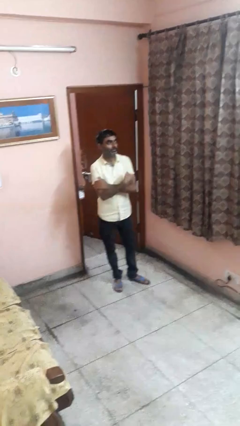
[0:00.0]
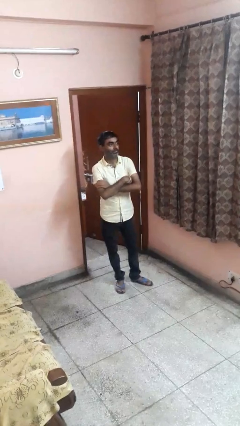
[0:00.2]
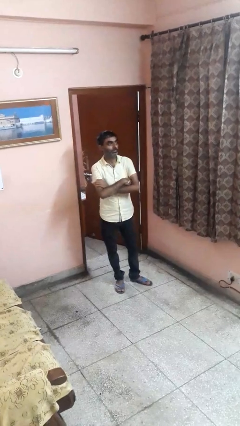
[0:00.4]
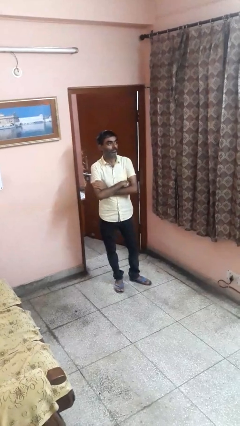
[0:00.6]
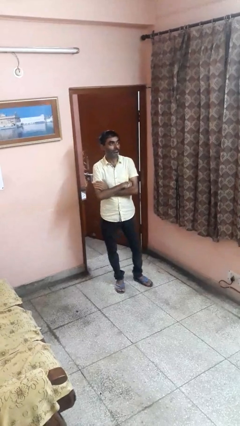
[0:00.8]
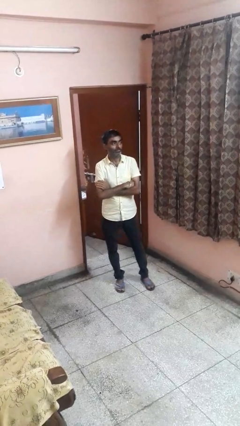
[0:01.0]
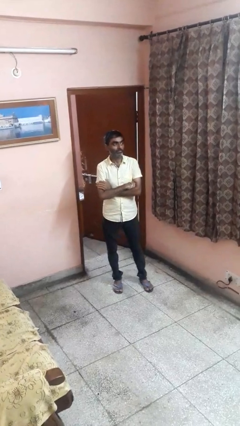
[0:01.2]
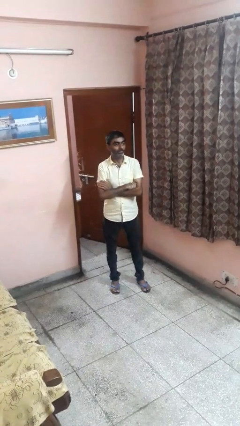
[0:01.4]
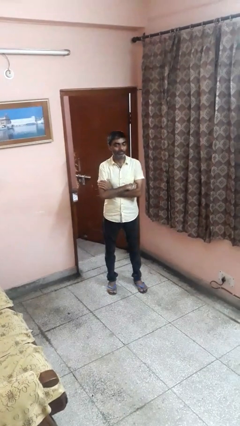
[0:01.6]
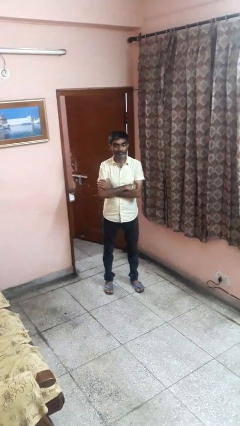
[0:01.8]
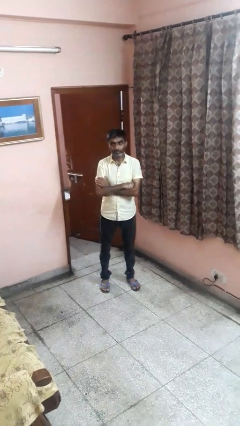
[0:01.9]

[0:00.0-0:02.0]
person crosses arms

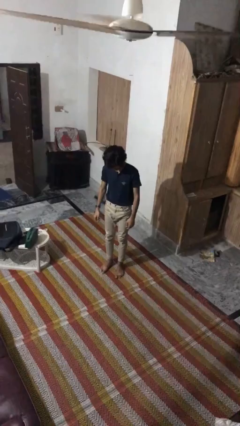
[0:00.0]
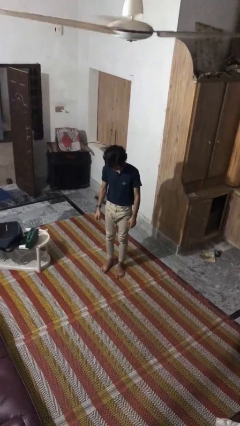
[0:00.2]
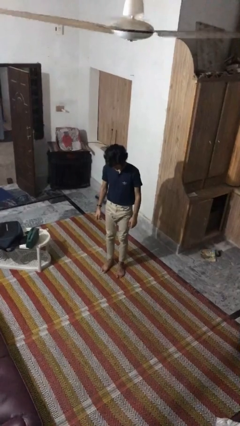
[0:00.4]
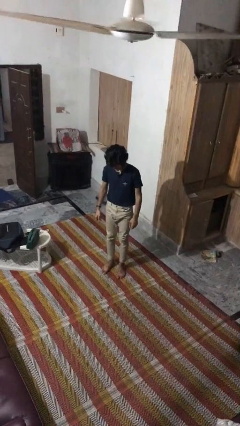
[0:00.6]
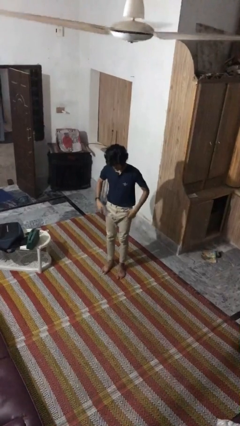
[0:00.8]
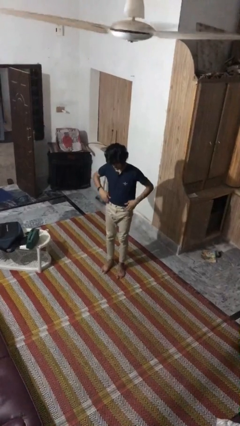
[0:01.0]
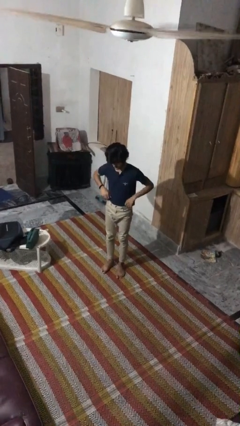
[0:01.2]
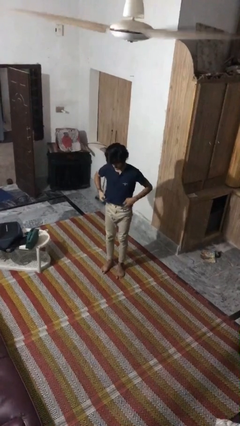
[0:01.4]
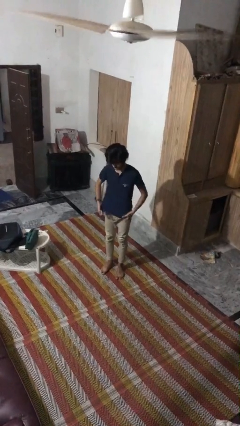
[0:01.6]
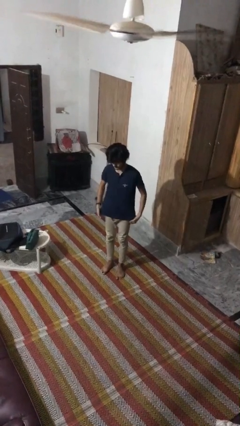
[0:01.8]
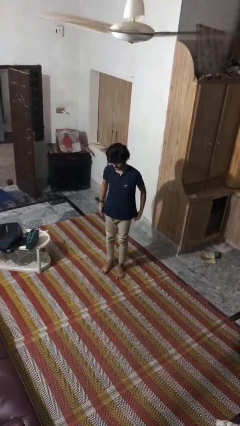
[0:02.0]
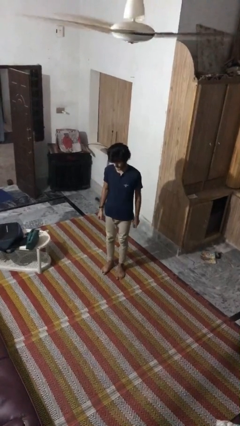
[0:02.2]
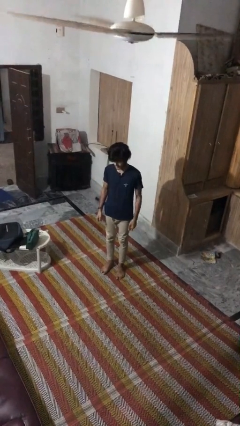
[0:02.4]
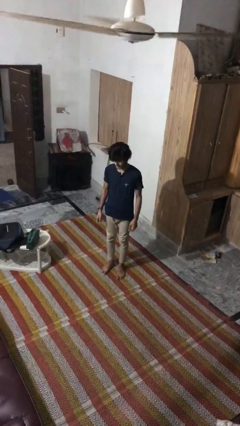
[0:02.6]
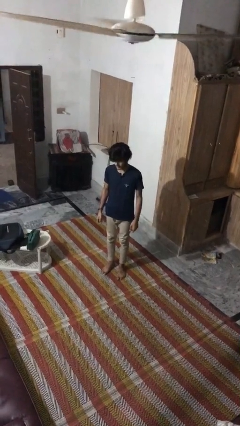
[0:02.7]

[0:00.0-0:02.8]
person untucks shirt

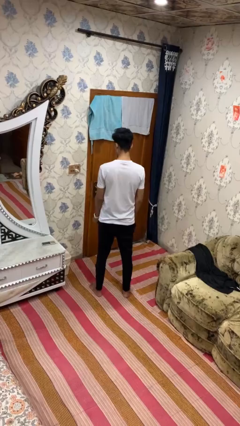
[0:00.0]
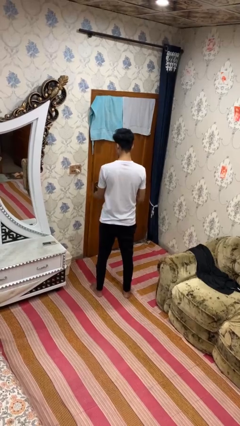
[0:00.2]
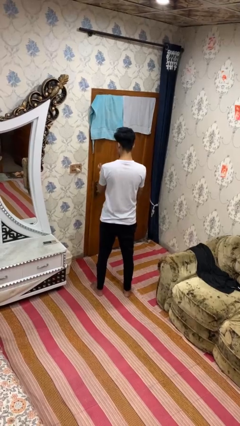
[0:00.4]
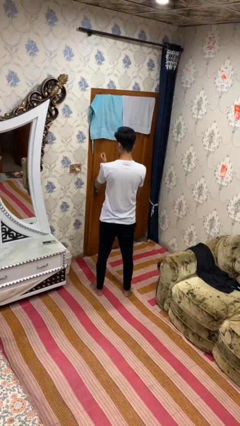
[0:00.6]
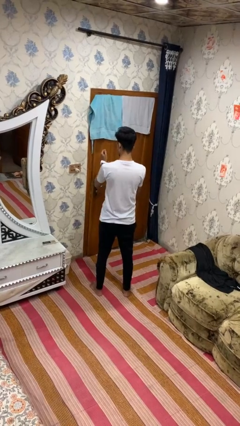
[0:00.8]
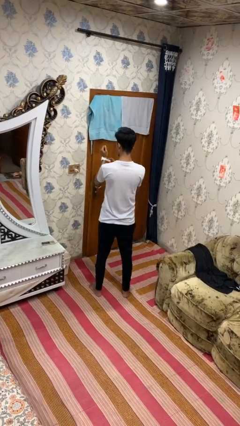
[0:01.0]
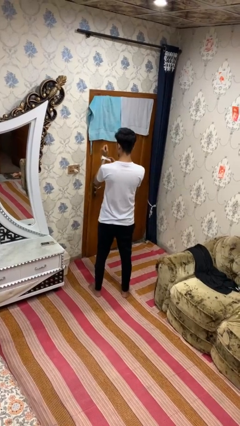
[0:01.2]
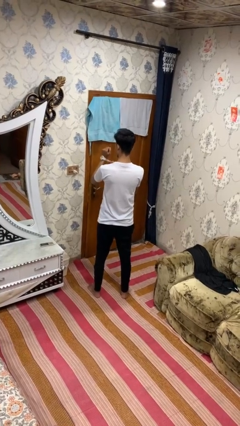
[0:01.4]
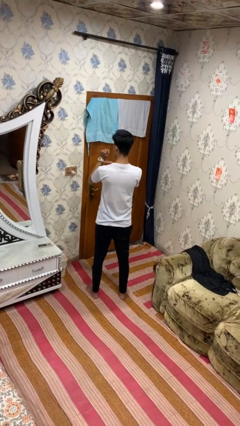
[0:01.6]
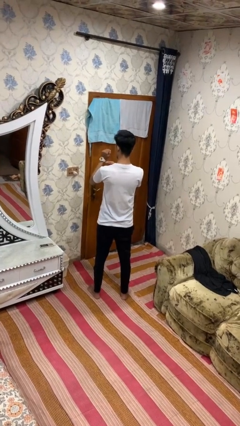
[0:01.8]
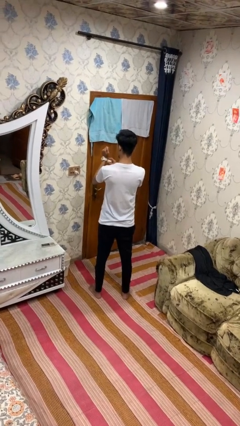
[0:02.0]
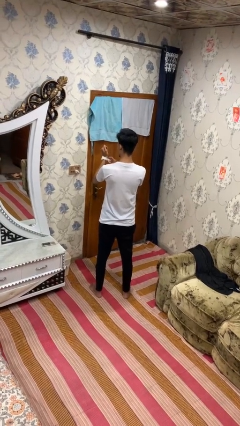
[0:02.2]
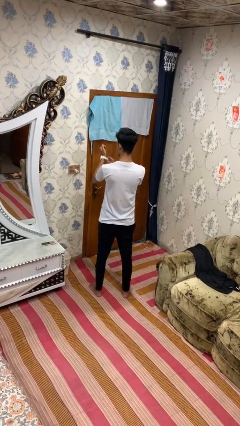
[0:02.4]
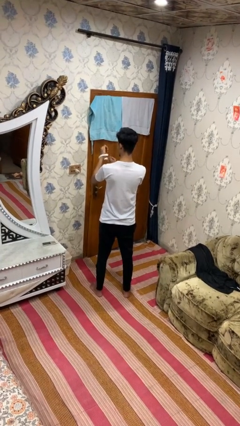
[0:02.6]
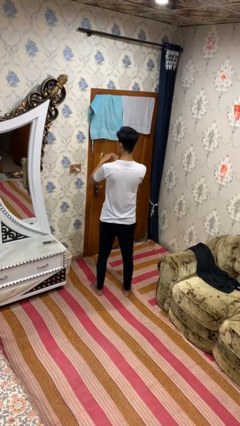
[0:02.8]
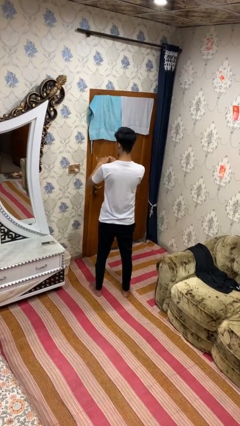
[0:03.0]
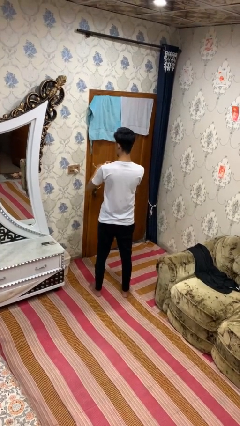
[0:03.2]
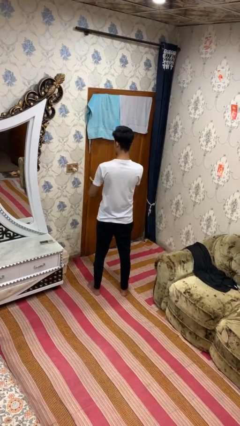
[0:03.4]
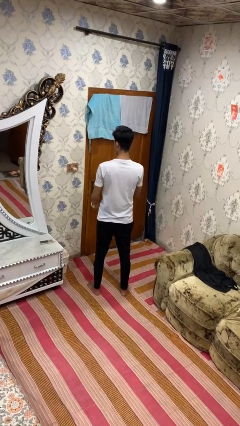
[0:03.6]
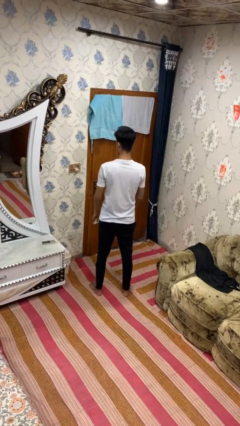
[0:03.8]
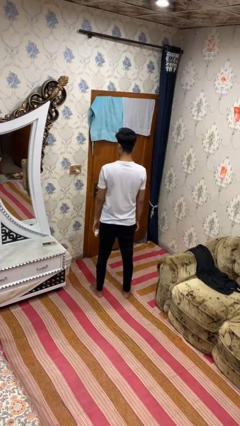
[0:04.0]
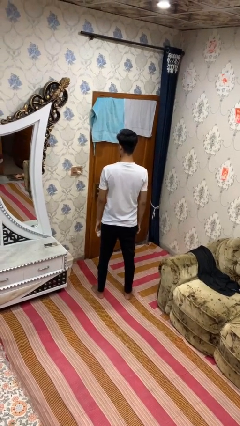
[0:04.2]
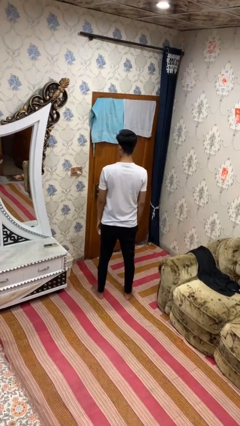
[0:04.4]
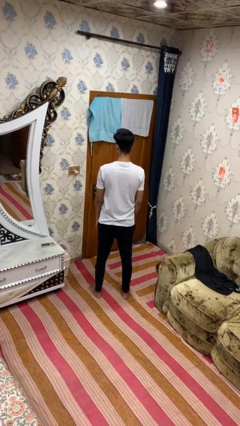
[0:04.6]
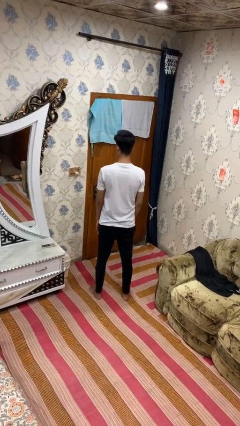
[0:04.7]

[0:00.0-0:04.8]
person takes off wristwatch

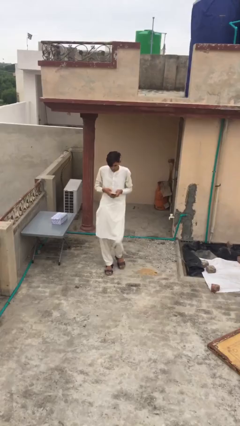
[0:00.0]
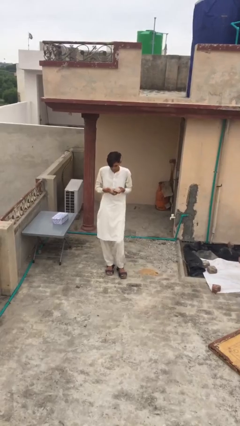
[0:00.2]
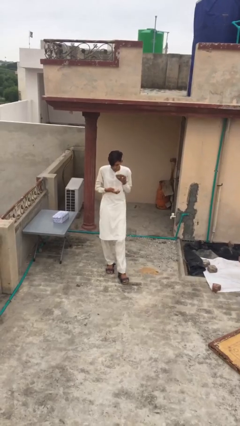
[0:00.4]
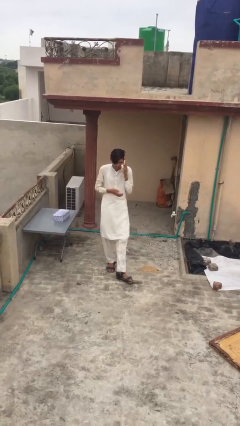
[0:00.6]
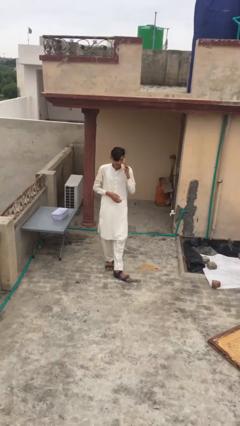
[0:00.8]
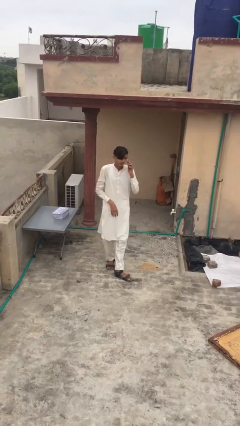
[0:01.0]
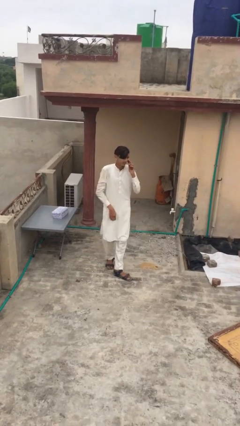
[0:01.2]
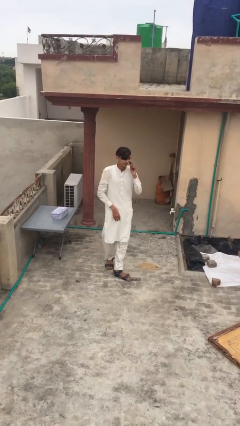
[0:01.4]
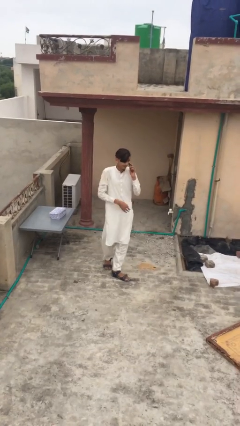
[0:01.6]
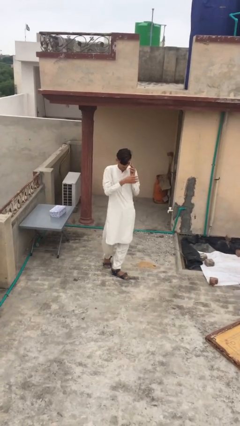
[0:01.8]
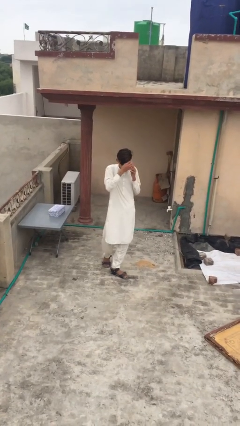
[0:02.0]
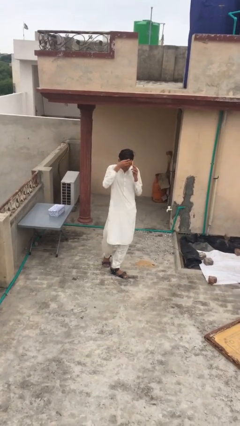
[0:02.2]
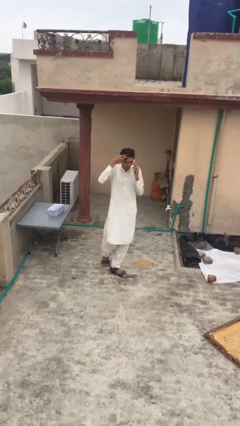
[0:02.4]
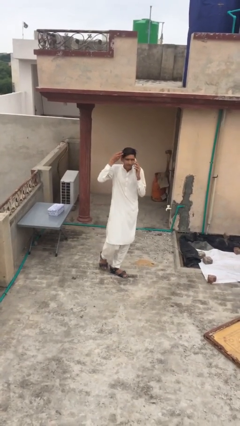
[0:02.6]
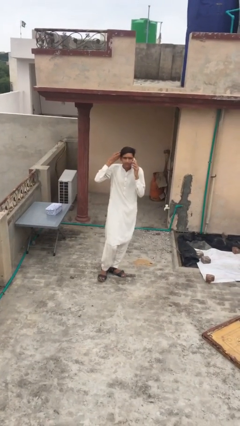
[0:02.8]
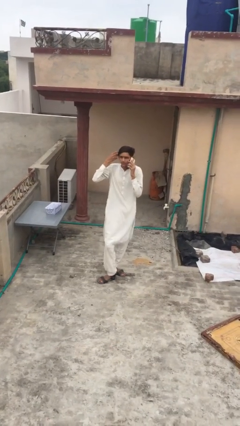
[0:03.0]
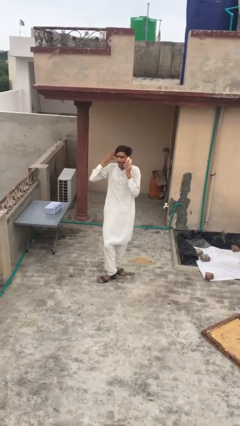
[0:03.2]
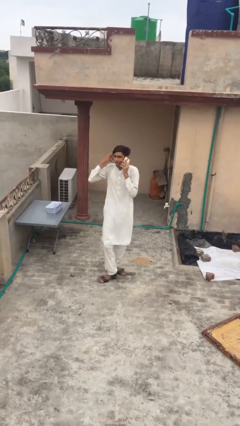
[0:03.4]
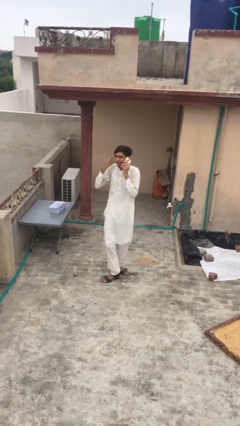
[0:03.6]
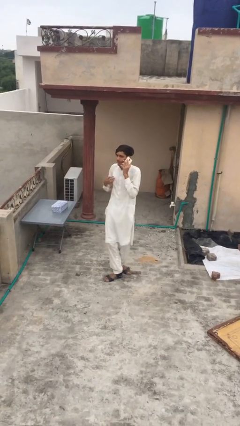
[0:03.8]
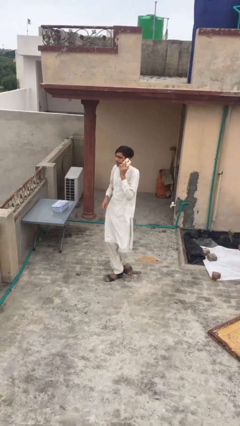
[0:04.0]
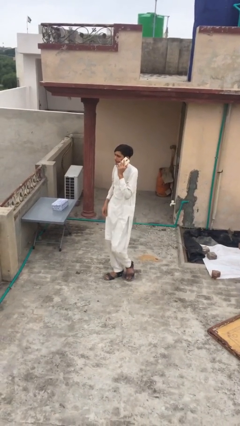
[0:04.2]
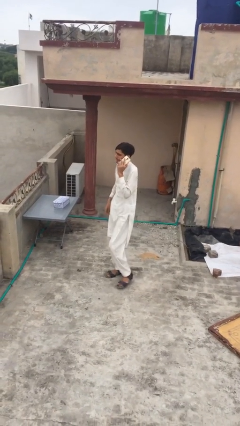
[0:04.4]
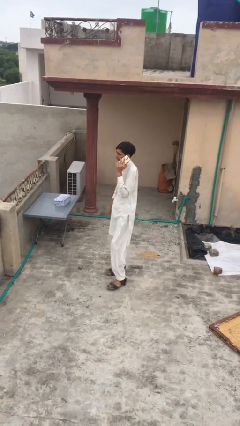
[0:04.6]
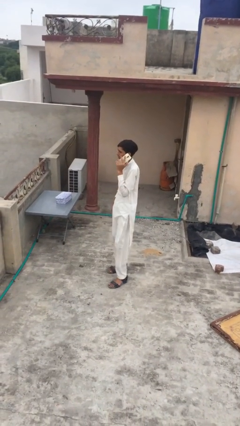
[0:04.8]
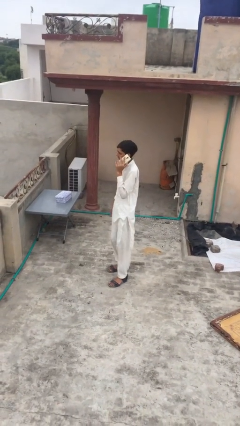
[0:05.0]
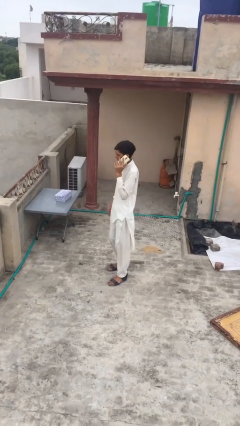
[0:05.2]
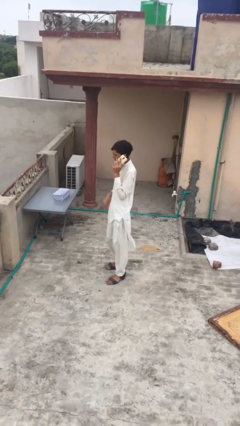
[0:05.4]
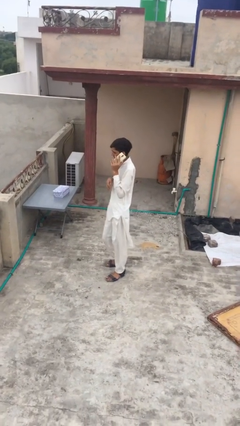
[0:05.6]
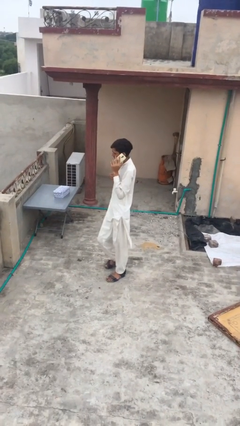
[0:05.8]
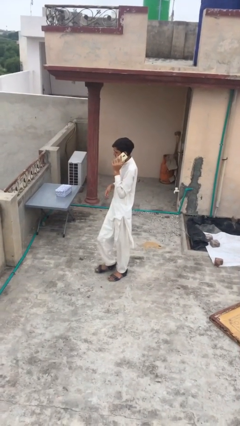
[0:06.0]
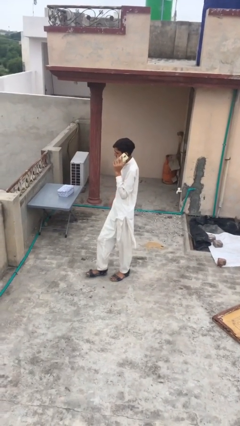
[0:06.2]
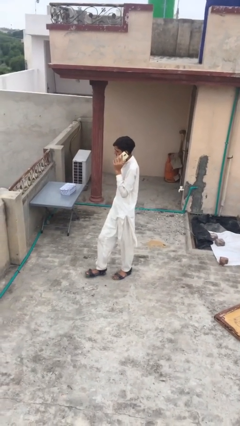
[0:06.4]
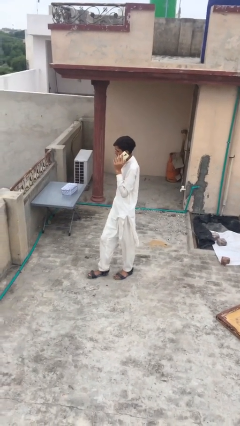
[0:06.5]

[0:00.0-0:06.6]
person talks on phone

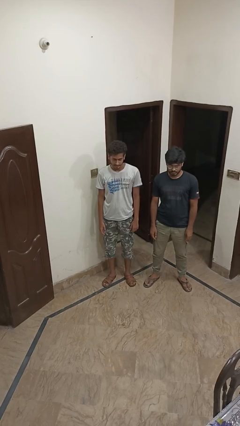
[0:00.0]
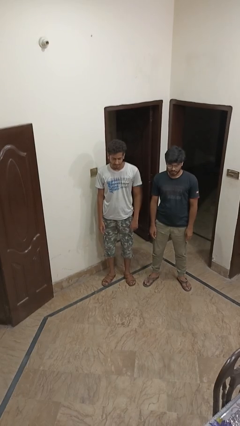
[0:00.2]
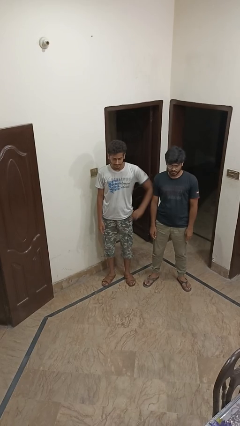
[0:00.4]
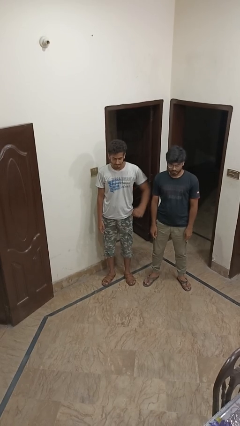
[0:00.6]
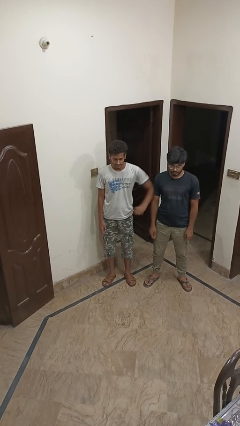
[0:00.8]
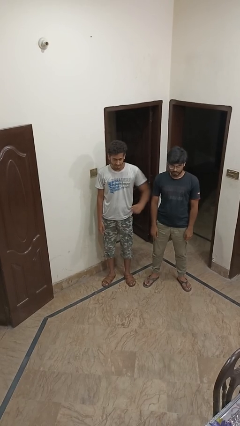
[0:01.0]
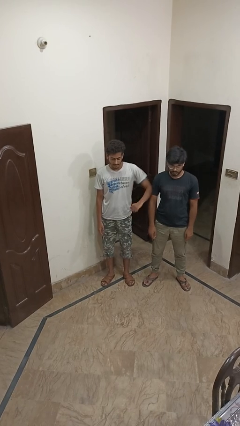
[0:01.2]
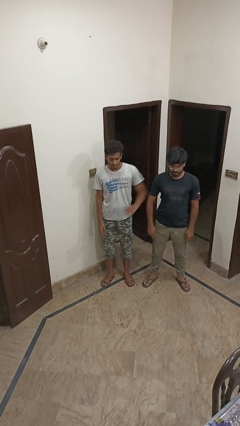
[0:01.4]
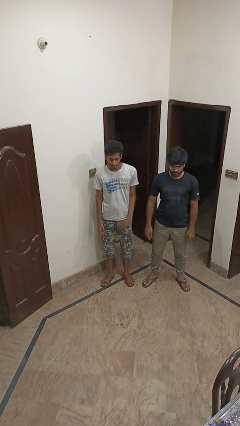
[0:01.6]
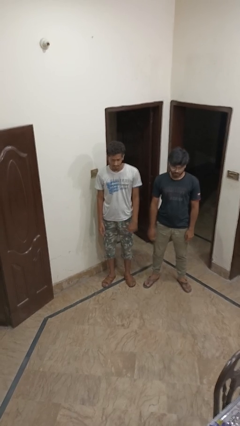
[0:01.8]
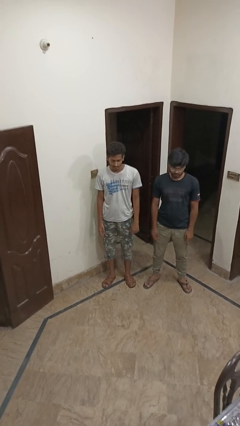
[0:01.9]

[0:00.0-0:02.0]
person nudges person with elbow
